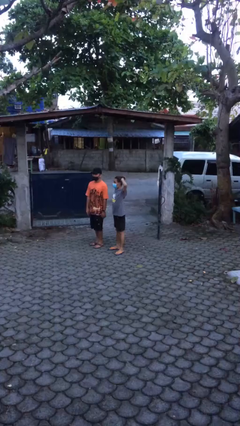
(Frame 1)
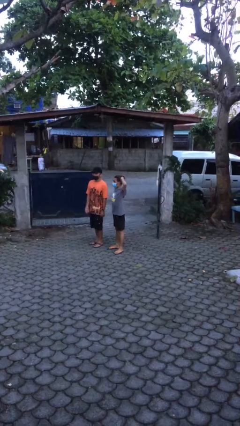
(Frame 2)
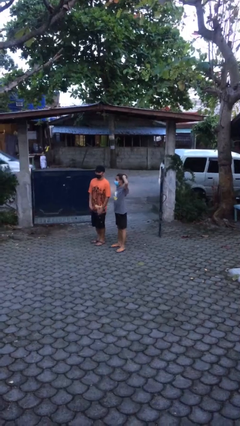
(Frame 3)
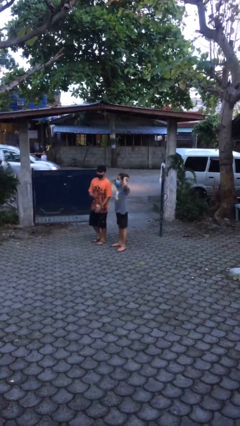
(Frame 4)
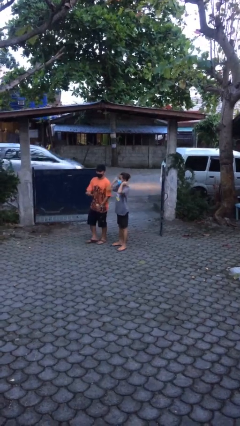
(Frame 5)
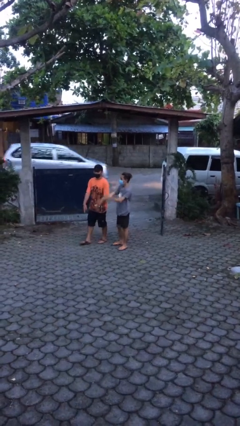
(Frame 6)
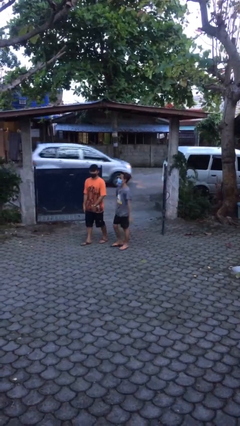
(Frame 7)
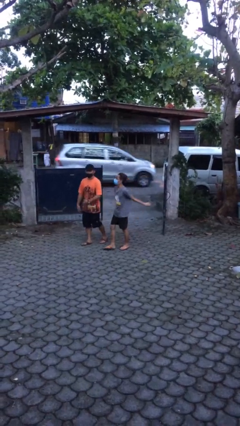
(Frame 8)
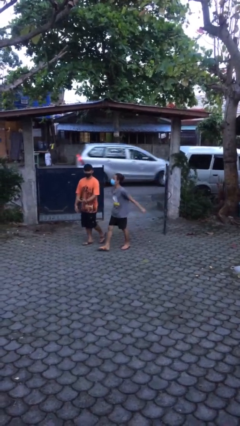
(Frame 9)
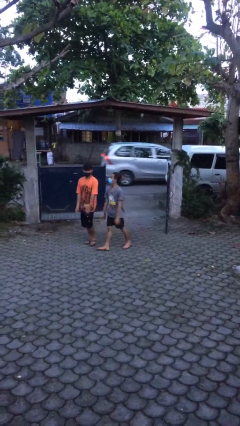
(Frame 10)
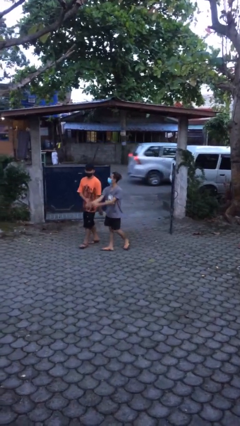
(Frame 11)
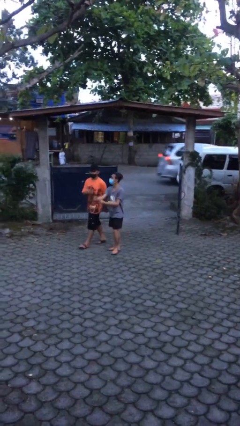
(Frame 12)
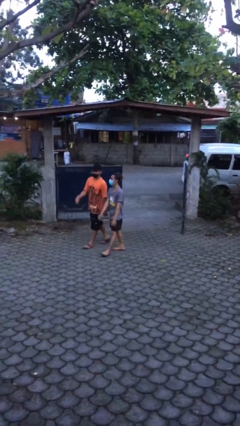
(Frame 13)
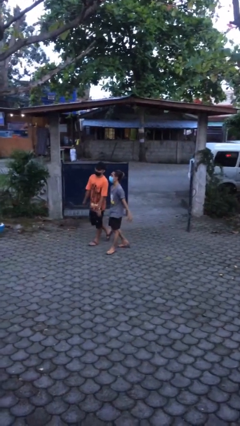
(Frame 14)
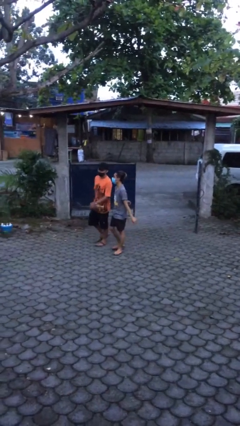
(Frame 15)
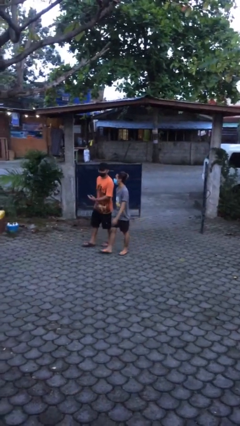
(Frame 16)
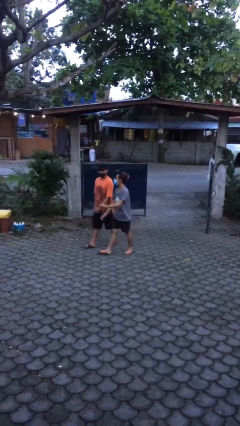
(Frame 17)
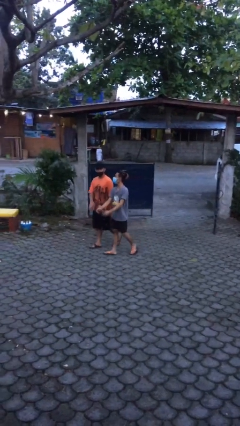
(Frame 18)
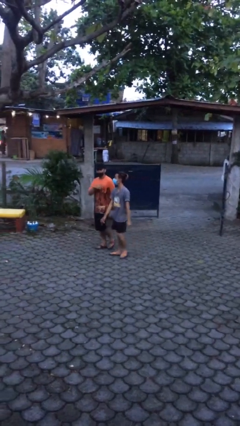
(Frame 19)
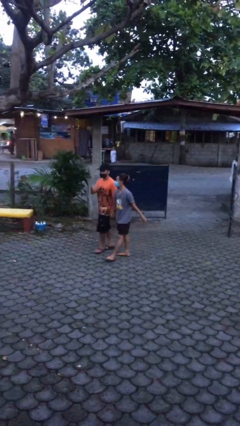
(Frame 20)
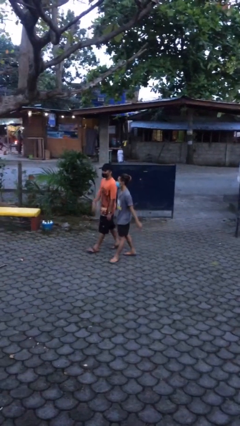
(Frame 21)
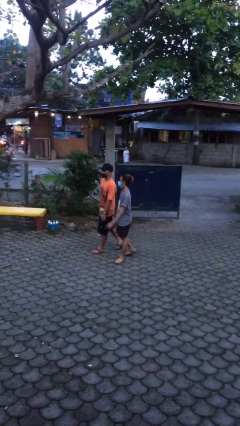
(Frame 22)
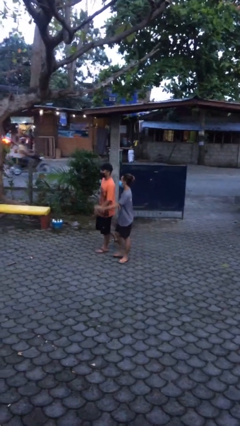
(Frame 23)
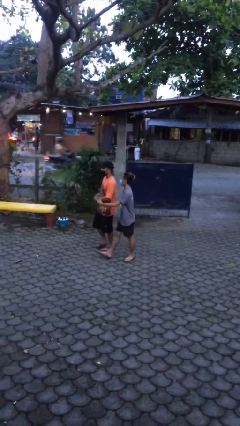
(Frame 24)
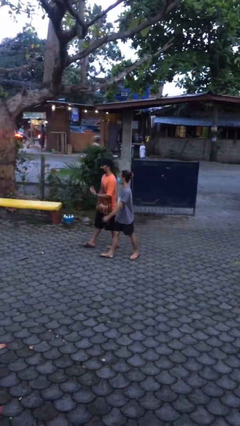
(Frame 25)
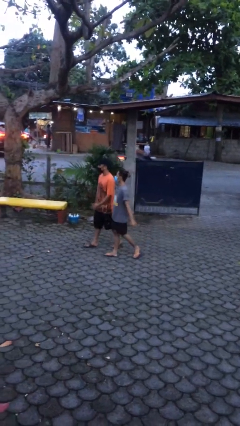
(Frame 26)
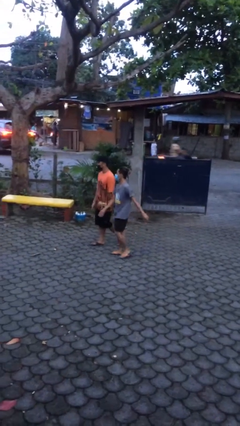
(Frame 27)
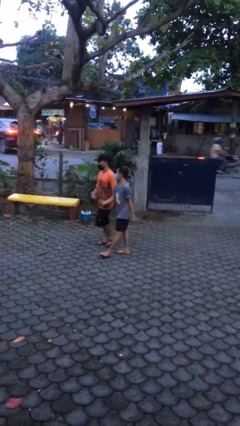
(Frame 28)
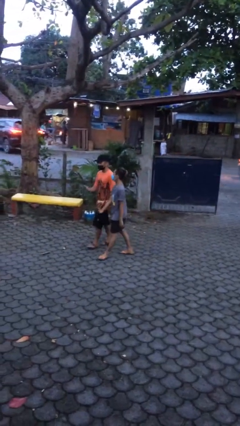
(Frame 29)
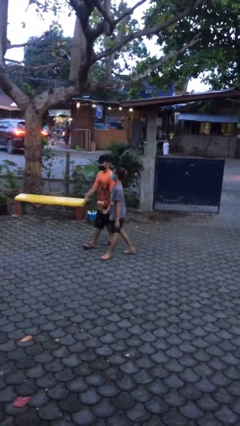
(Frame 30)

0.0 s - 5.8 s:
person talks to person

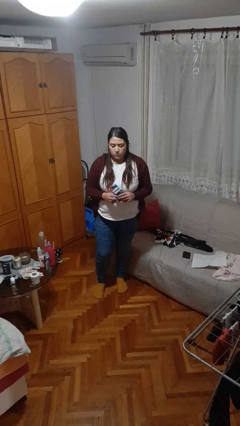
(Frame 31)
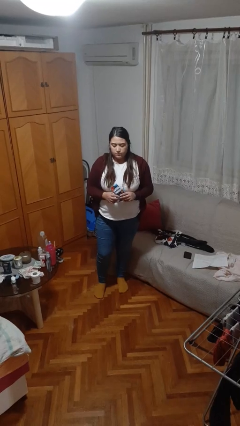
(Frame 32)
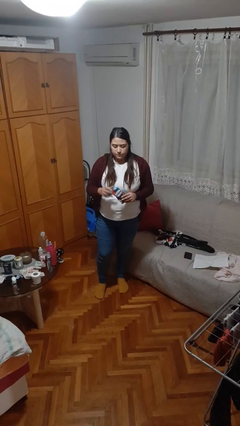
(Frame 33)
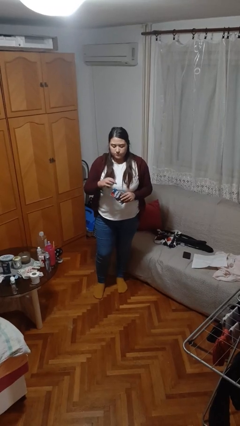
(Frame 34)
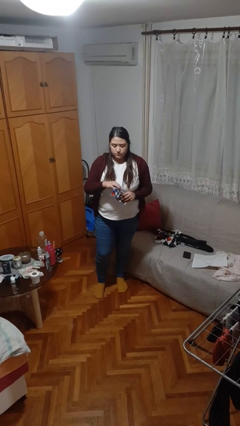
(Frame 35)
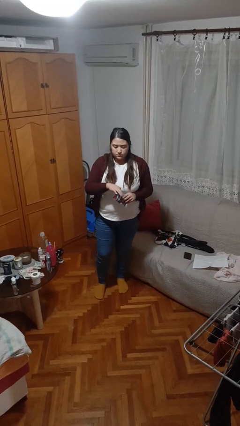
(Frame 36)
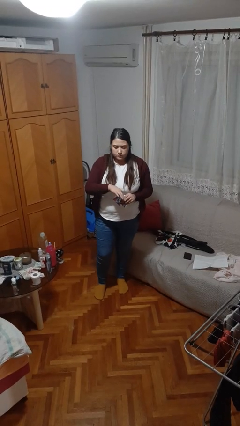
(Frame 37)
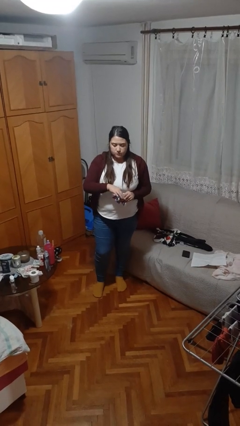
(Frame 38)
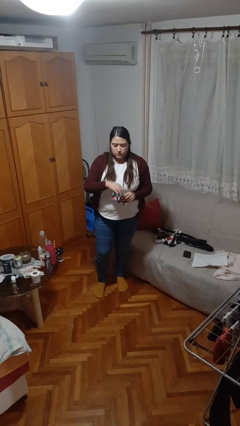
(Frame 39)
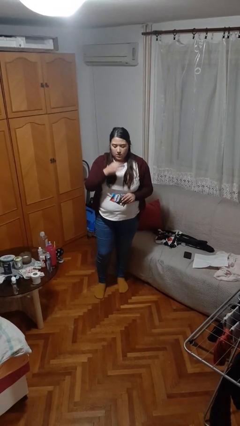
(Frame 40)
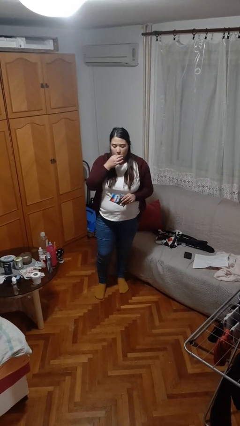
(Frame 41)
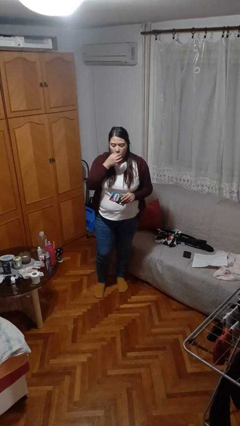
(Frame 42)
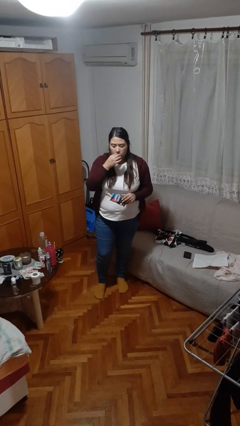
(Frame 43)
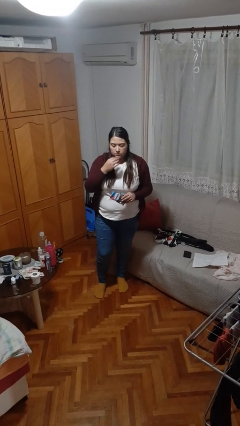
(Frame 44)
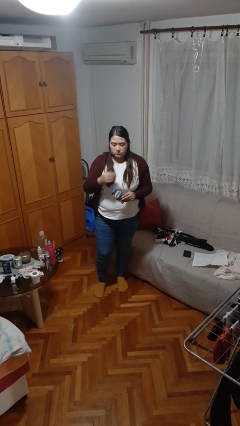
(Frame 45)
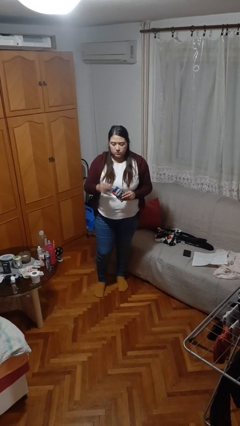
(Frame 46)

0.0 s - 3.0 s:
person eats snack from bag

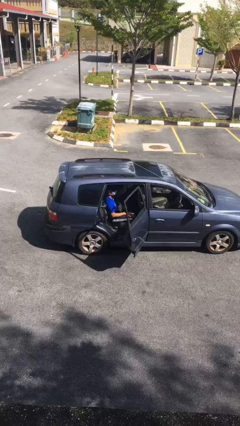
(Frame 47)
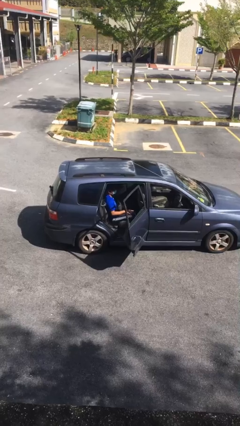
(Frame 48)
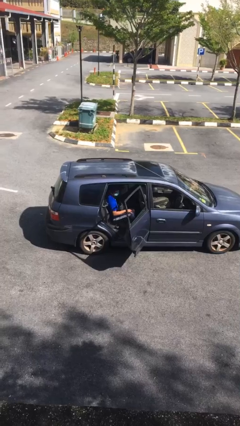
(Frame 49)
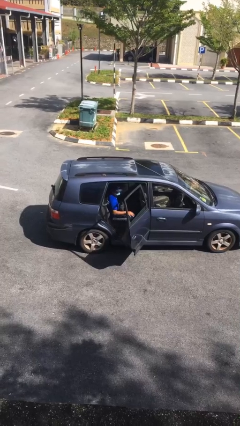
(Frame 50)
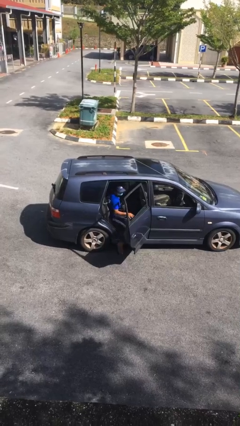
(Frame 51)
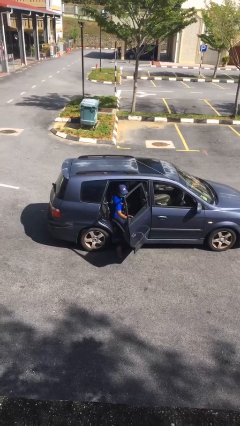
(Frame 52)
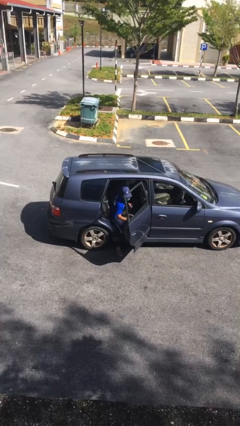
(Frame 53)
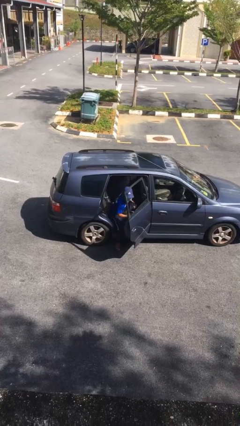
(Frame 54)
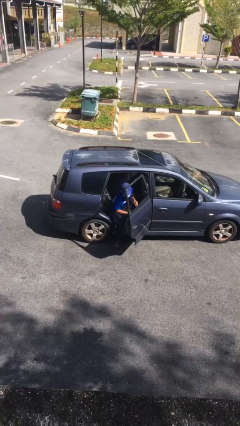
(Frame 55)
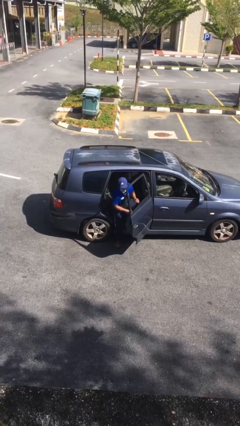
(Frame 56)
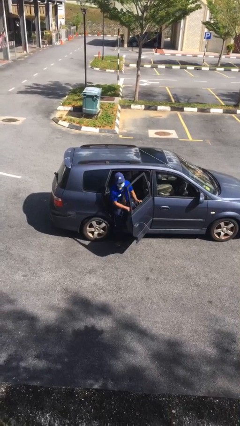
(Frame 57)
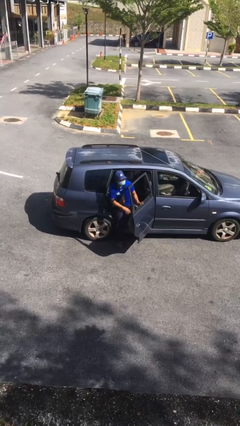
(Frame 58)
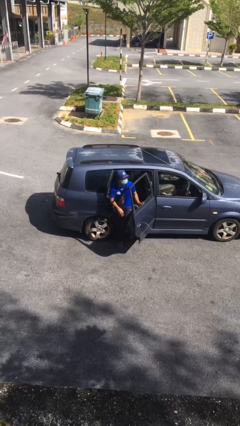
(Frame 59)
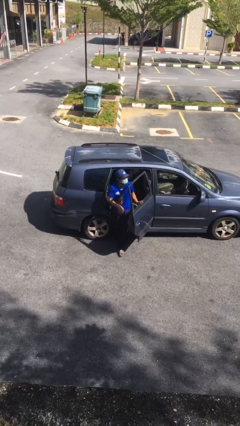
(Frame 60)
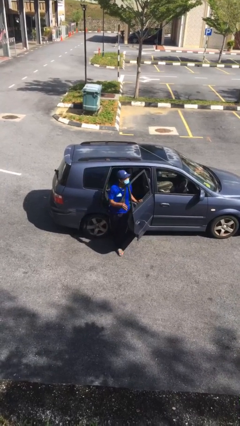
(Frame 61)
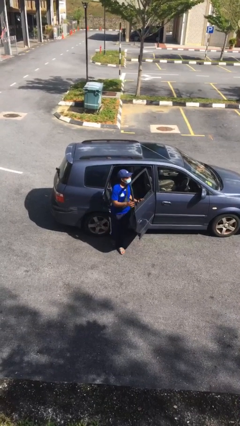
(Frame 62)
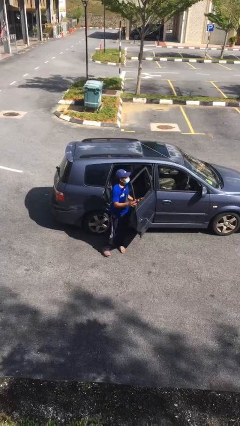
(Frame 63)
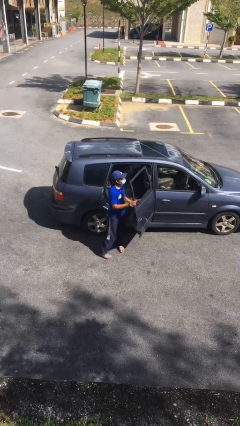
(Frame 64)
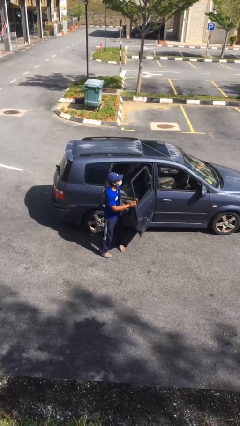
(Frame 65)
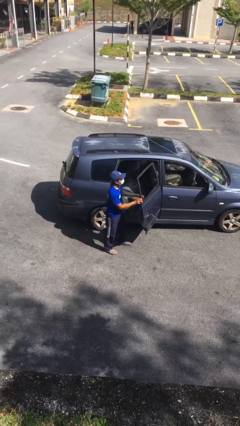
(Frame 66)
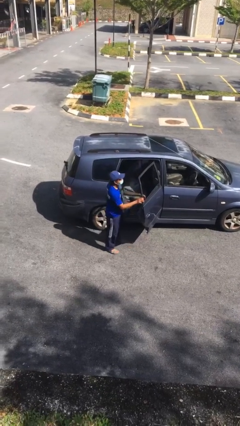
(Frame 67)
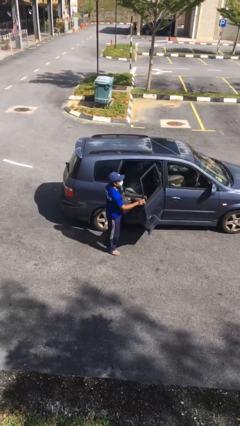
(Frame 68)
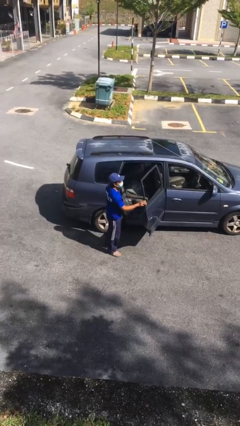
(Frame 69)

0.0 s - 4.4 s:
person exits car

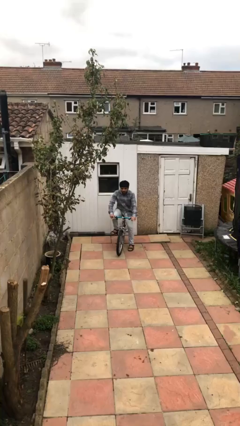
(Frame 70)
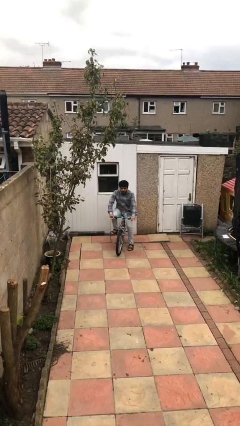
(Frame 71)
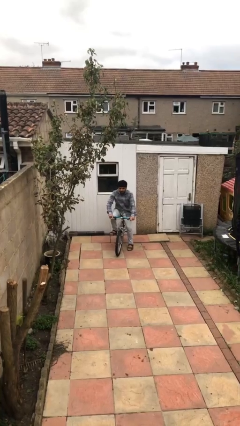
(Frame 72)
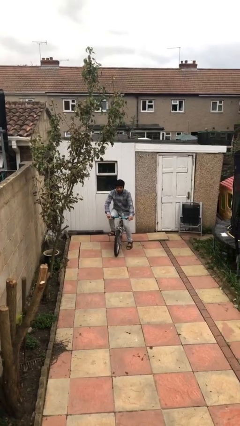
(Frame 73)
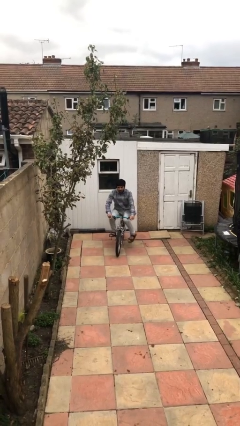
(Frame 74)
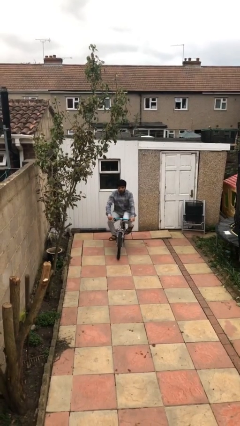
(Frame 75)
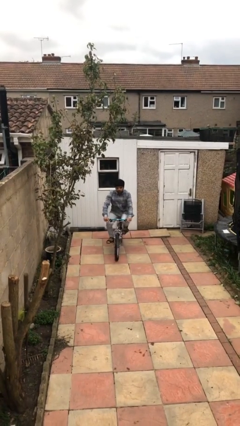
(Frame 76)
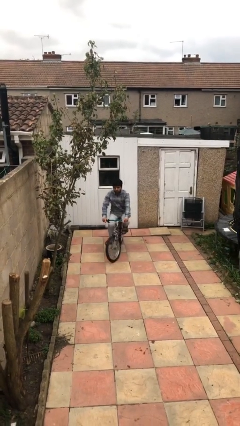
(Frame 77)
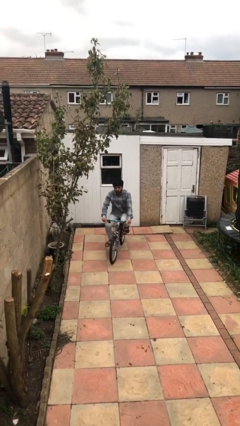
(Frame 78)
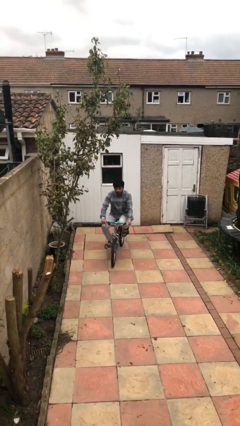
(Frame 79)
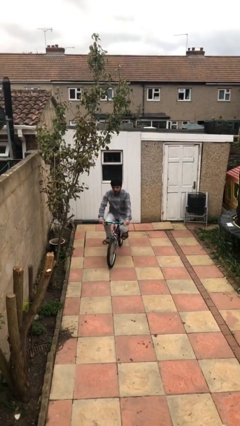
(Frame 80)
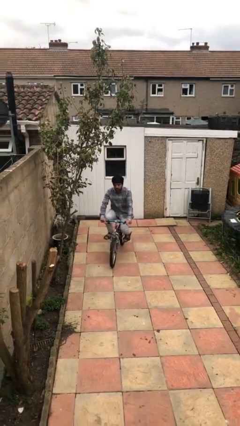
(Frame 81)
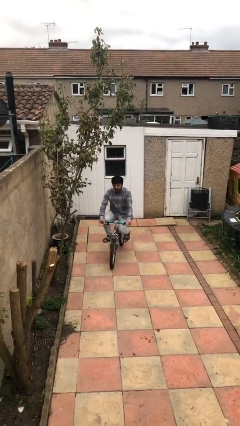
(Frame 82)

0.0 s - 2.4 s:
person rides bicycle

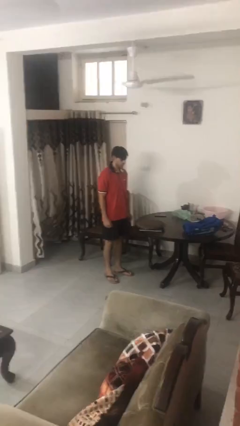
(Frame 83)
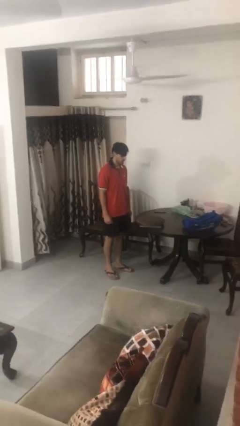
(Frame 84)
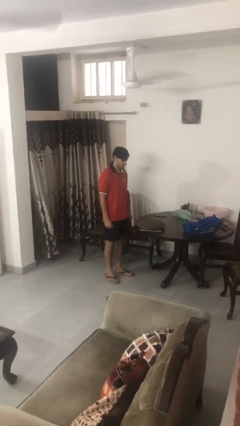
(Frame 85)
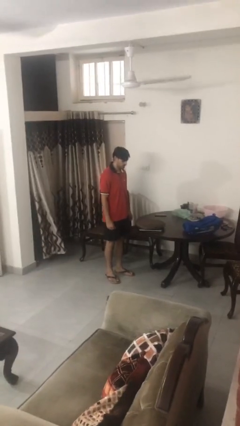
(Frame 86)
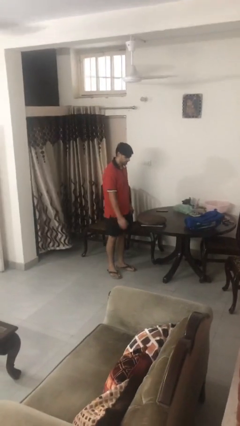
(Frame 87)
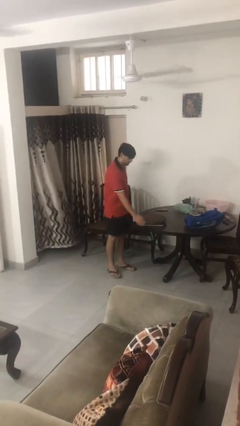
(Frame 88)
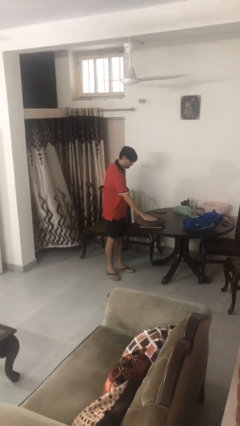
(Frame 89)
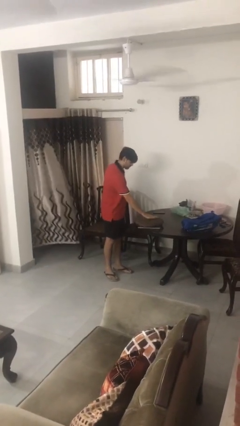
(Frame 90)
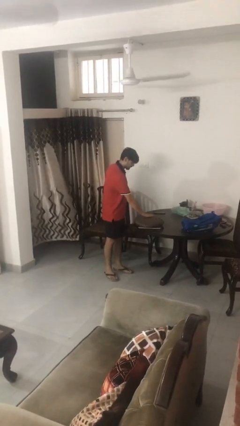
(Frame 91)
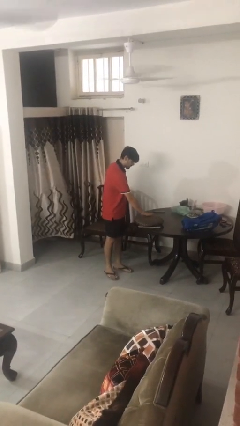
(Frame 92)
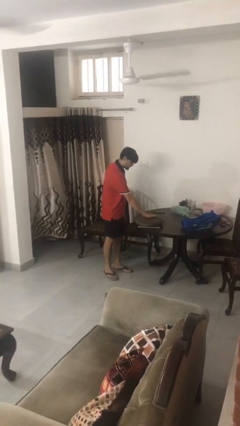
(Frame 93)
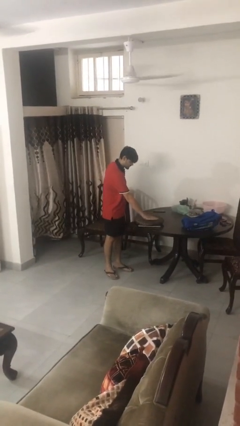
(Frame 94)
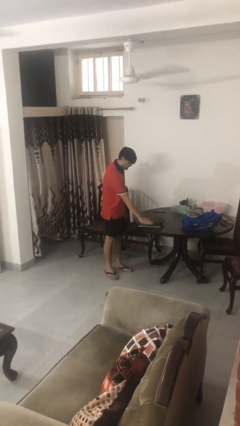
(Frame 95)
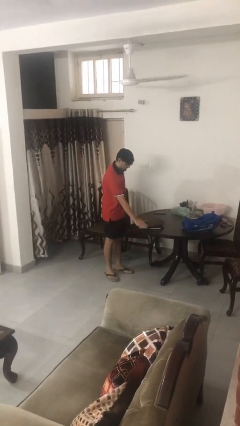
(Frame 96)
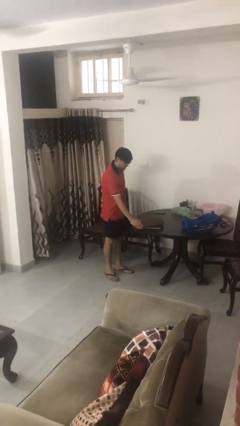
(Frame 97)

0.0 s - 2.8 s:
person waves hand over object
